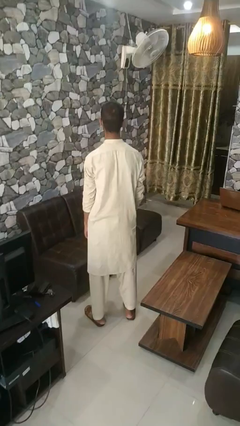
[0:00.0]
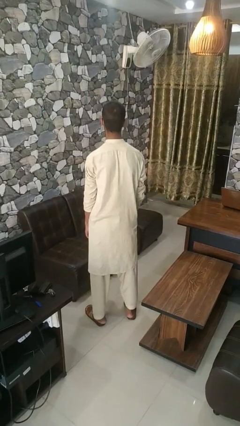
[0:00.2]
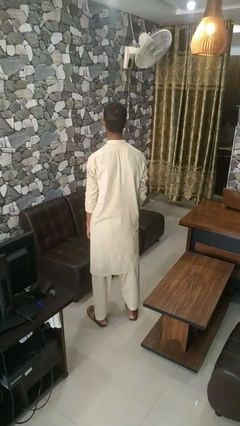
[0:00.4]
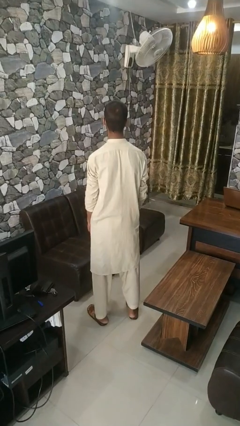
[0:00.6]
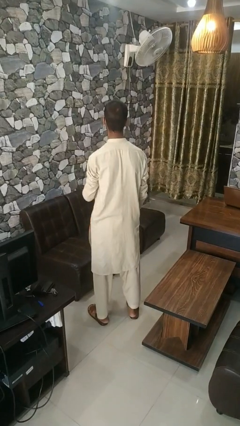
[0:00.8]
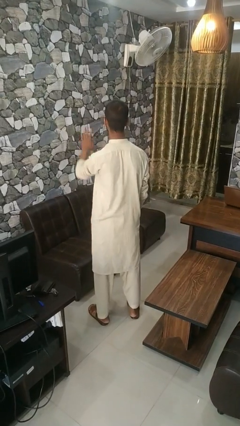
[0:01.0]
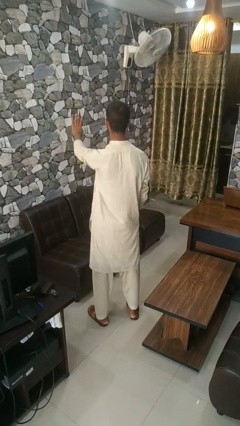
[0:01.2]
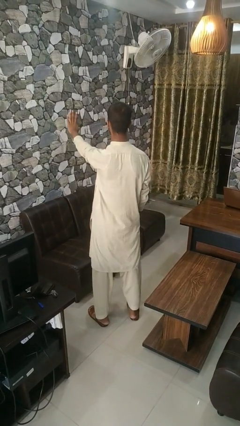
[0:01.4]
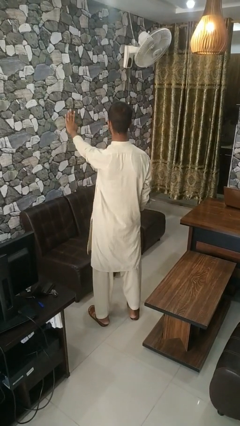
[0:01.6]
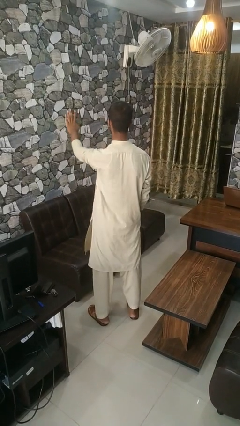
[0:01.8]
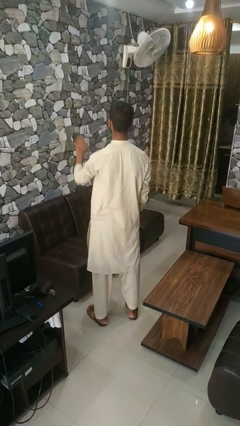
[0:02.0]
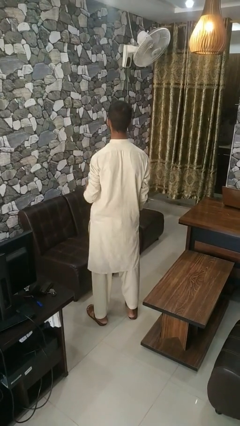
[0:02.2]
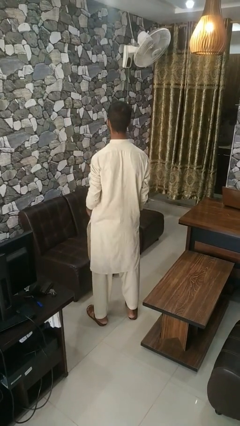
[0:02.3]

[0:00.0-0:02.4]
person gestures number four

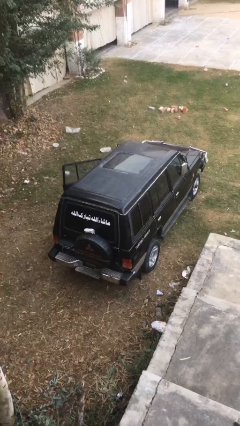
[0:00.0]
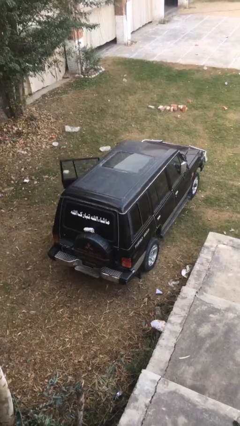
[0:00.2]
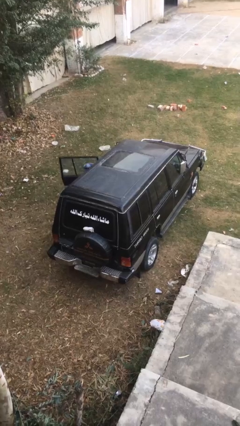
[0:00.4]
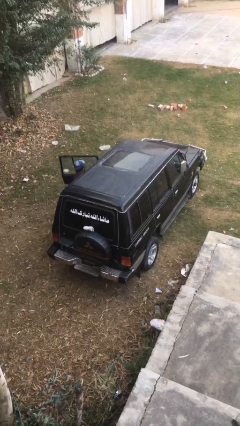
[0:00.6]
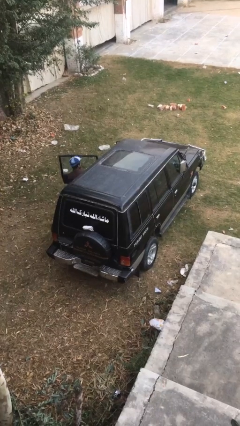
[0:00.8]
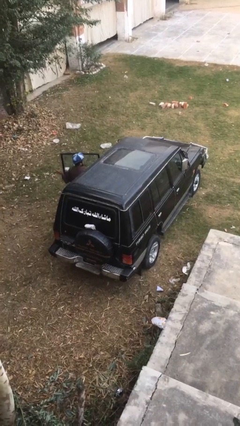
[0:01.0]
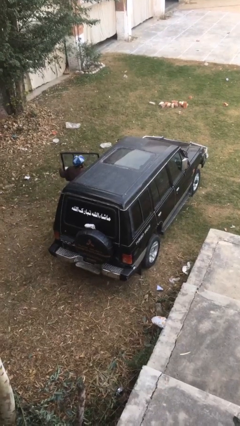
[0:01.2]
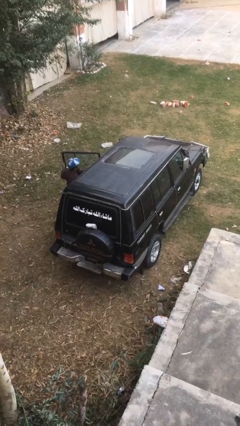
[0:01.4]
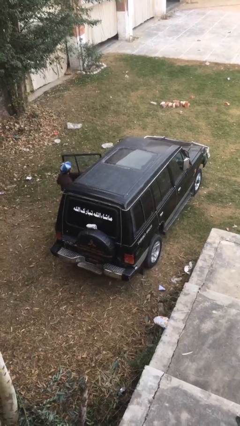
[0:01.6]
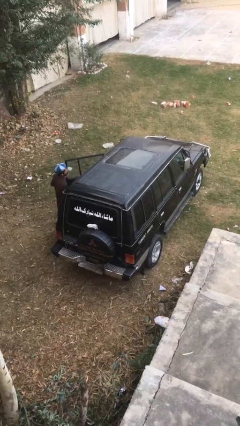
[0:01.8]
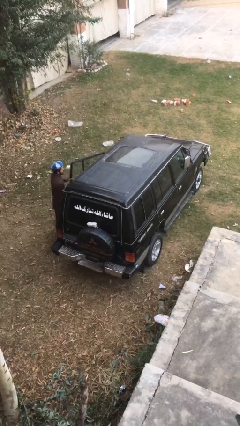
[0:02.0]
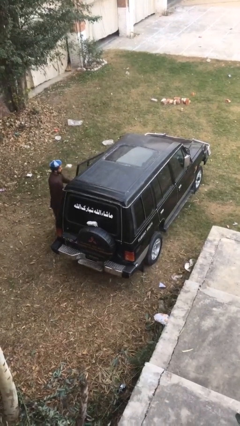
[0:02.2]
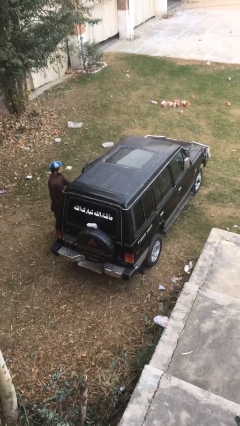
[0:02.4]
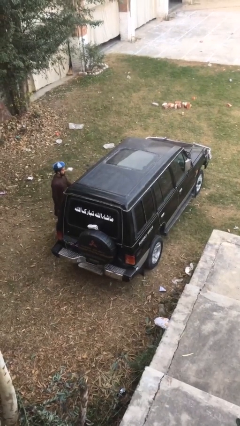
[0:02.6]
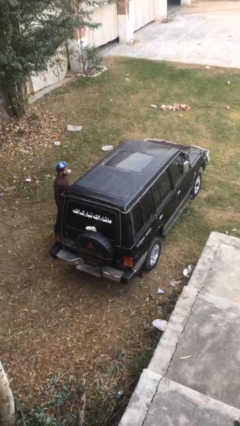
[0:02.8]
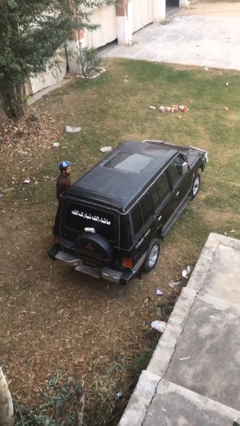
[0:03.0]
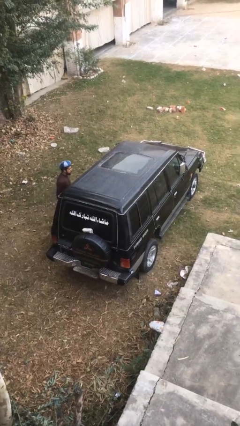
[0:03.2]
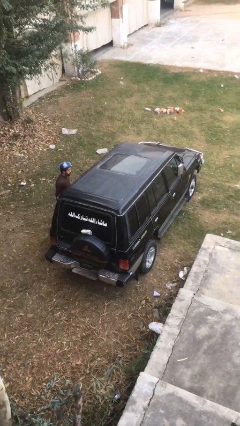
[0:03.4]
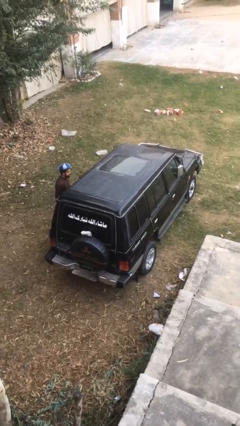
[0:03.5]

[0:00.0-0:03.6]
car drops off person

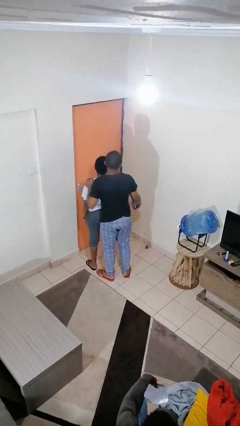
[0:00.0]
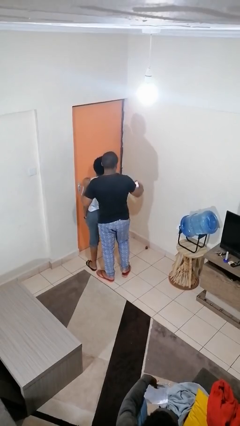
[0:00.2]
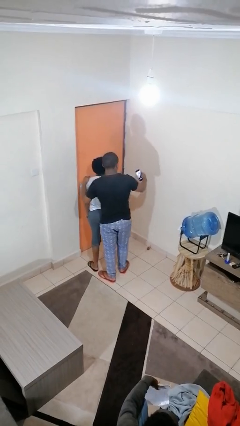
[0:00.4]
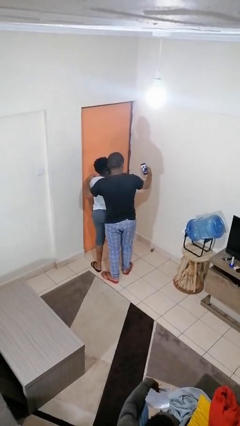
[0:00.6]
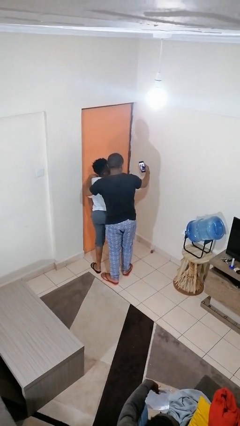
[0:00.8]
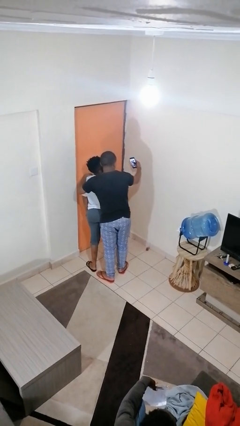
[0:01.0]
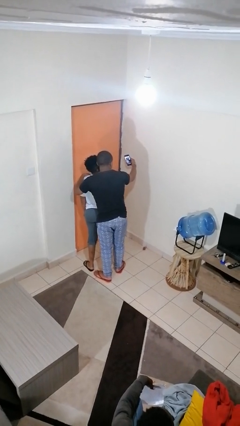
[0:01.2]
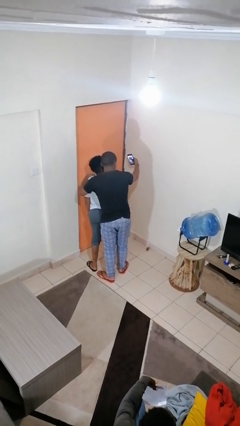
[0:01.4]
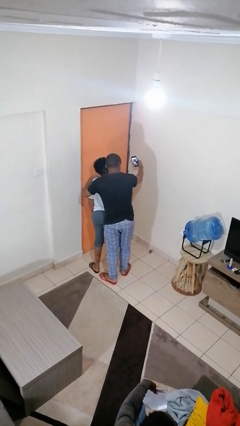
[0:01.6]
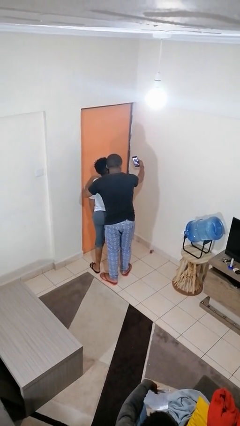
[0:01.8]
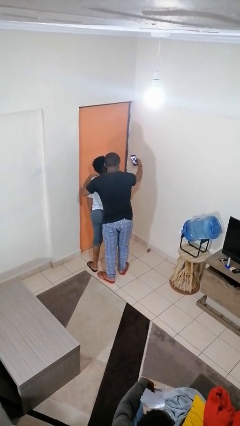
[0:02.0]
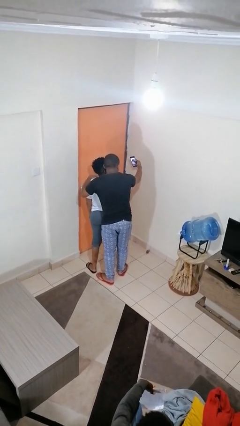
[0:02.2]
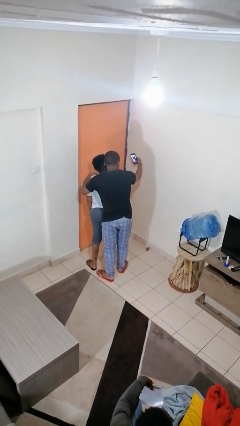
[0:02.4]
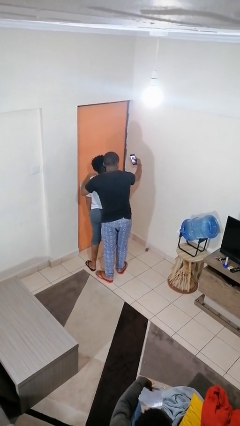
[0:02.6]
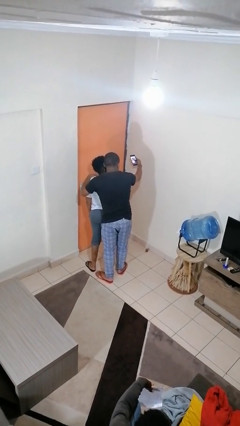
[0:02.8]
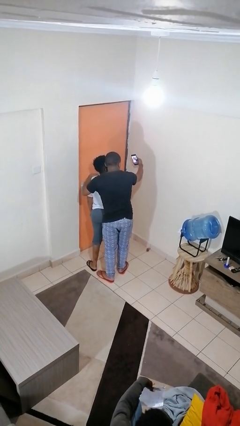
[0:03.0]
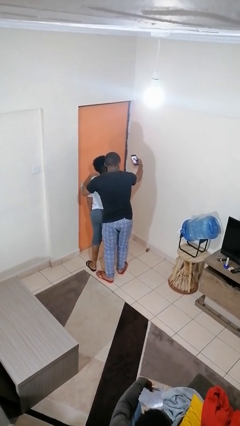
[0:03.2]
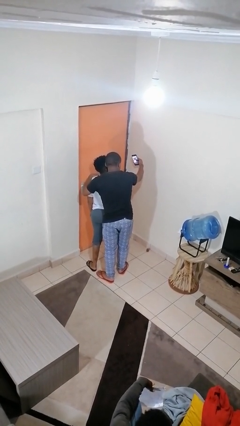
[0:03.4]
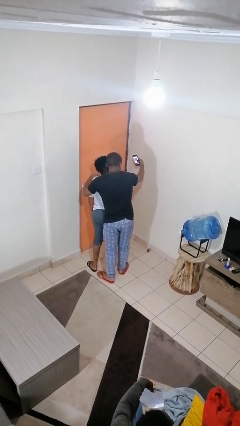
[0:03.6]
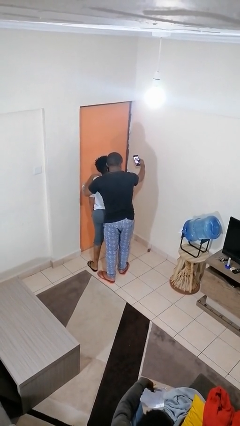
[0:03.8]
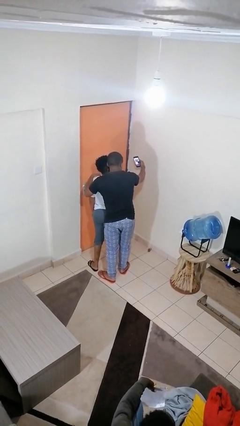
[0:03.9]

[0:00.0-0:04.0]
person takes selfie with person

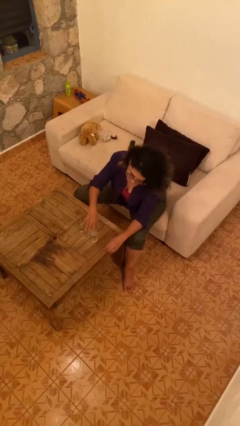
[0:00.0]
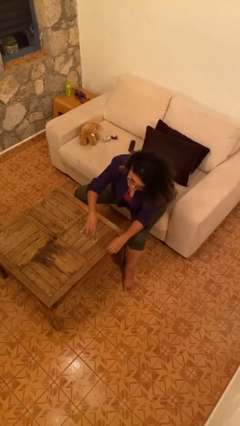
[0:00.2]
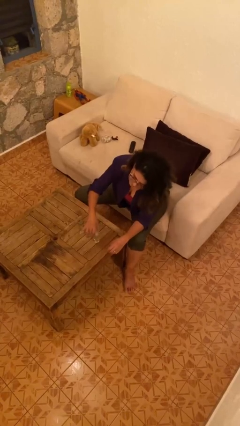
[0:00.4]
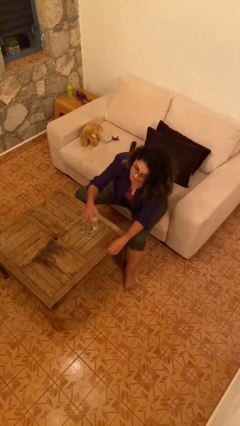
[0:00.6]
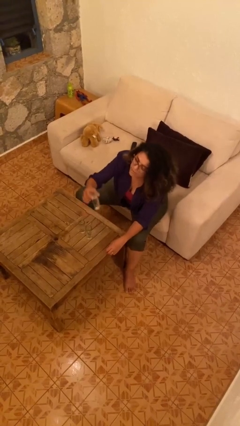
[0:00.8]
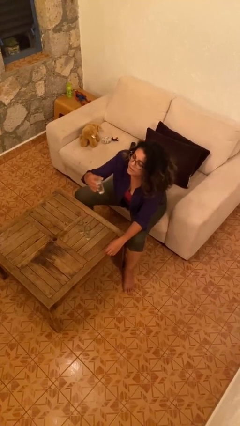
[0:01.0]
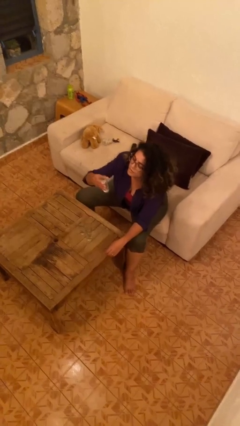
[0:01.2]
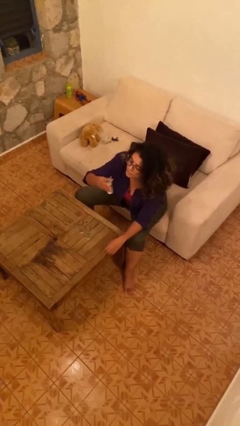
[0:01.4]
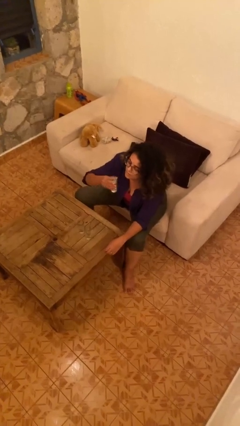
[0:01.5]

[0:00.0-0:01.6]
person picks up object from table

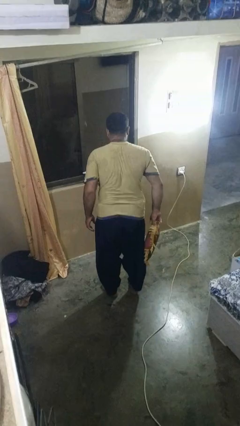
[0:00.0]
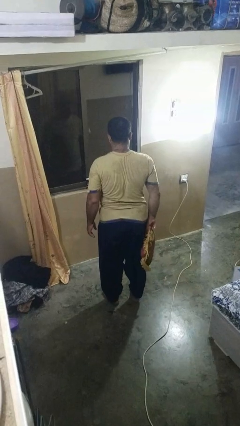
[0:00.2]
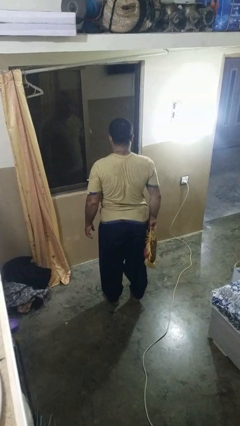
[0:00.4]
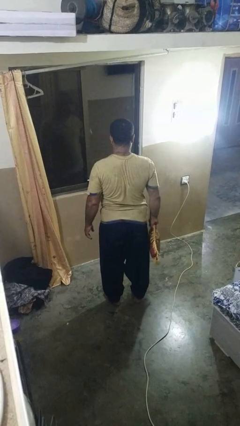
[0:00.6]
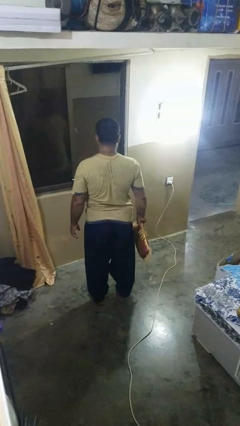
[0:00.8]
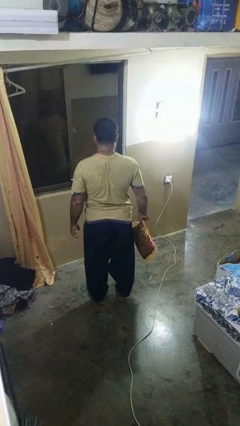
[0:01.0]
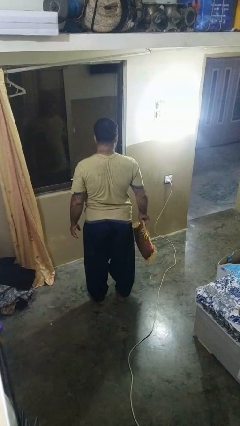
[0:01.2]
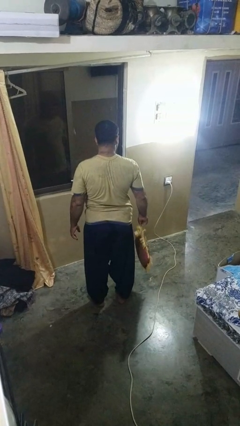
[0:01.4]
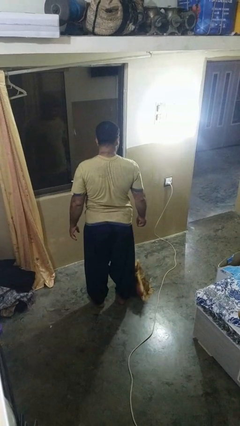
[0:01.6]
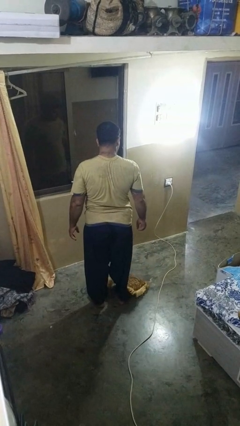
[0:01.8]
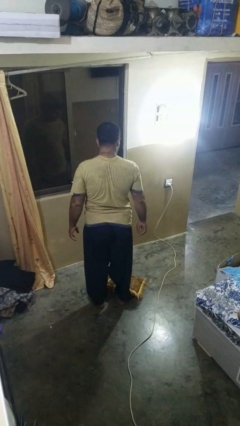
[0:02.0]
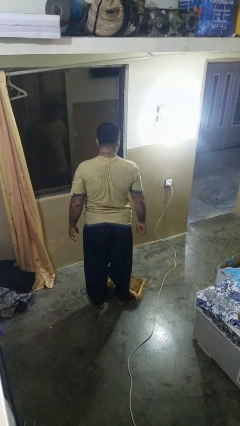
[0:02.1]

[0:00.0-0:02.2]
person drops object

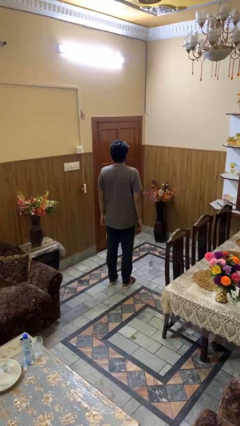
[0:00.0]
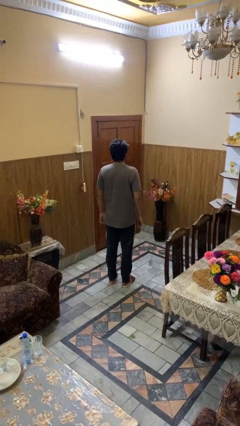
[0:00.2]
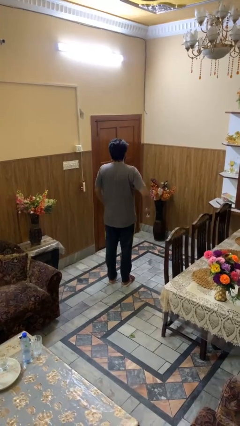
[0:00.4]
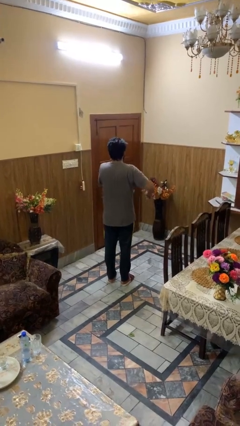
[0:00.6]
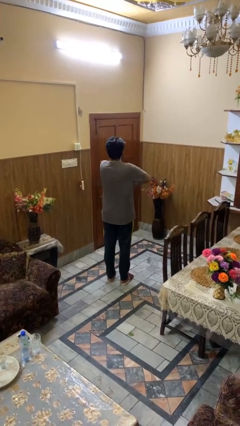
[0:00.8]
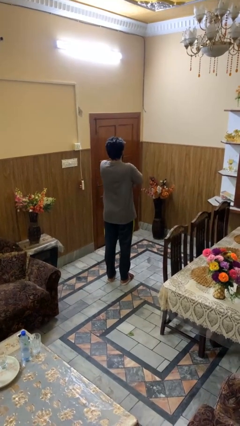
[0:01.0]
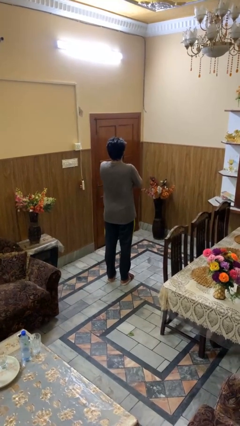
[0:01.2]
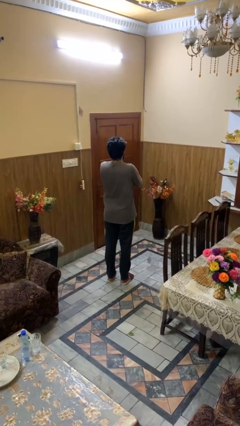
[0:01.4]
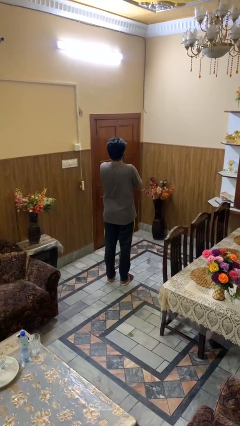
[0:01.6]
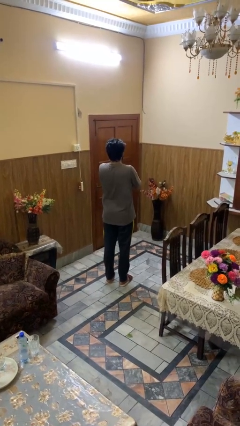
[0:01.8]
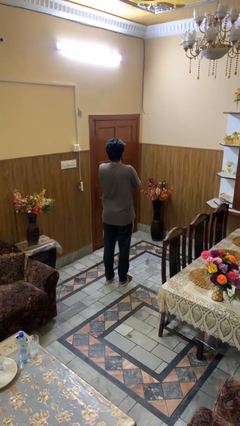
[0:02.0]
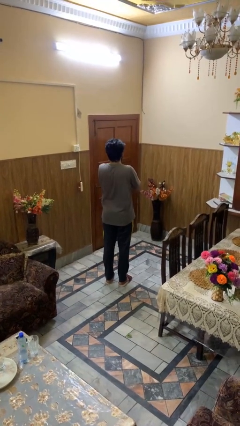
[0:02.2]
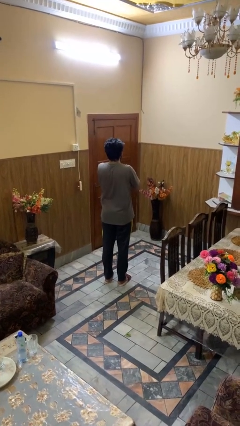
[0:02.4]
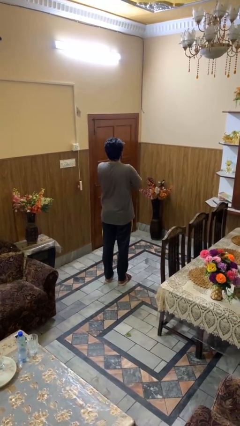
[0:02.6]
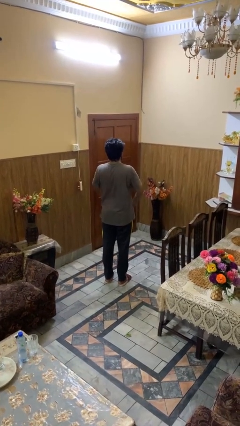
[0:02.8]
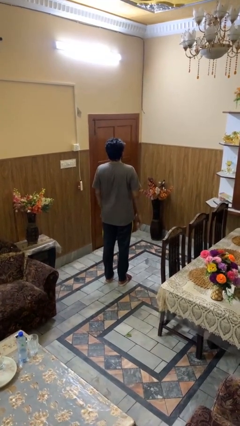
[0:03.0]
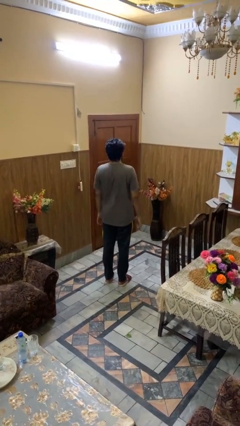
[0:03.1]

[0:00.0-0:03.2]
person crosses arms
